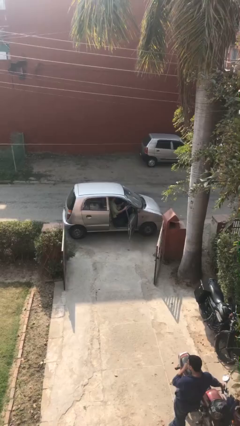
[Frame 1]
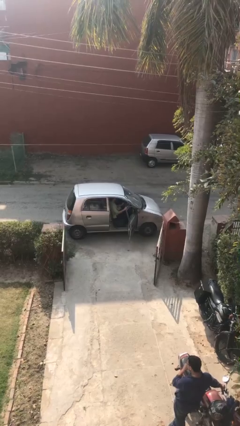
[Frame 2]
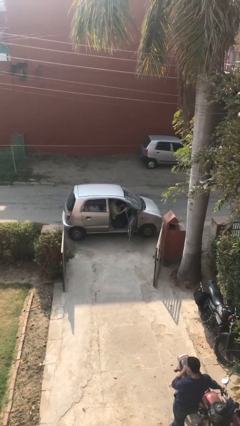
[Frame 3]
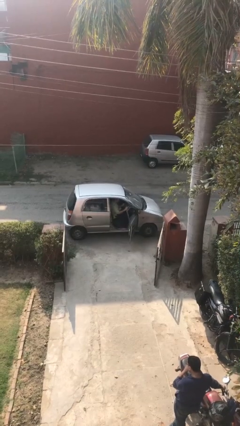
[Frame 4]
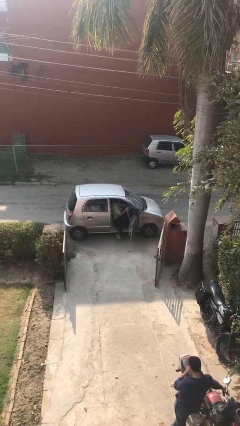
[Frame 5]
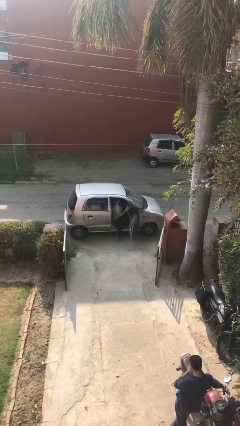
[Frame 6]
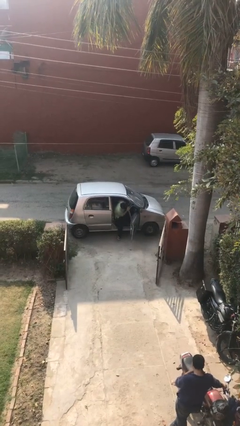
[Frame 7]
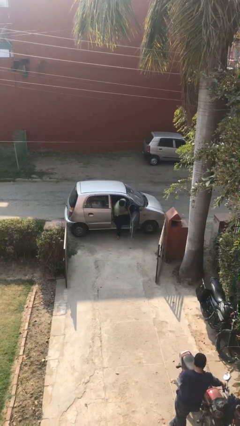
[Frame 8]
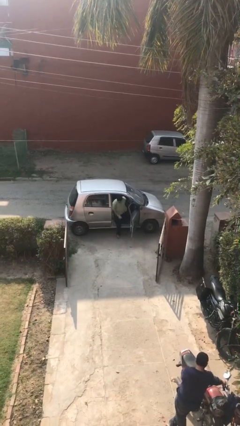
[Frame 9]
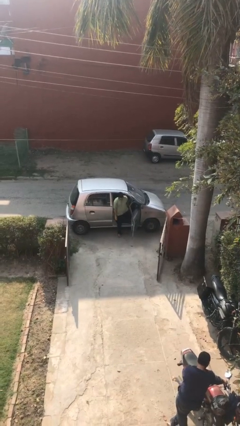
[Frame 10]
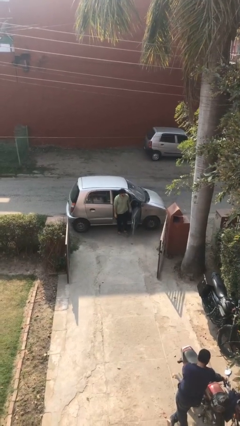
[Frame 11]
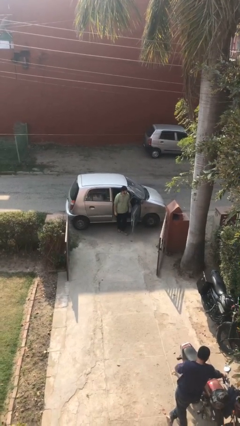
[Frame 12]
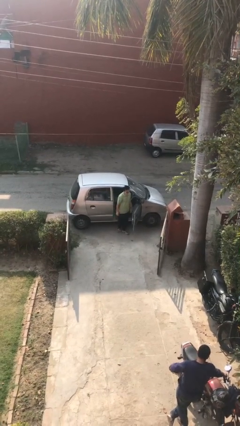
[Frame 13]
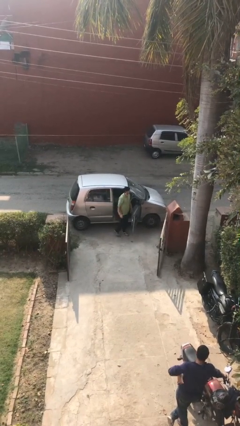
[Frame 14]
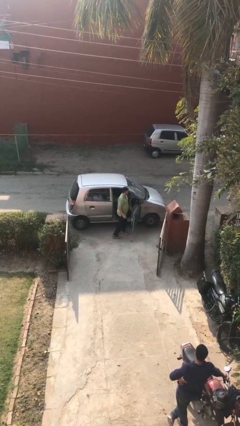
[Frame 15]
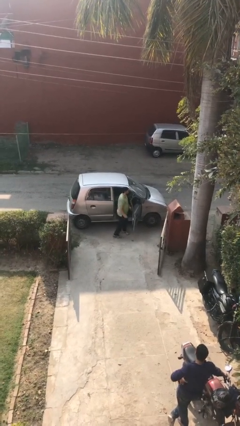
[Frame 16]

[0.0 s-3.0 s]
person exits car

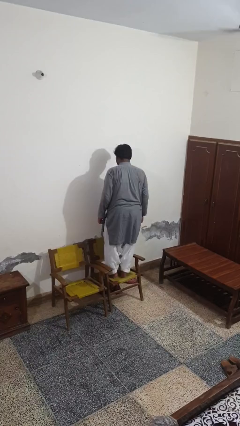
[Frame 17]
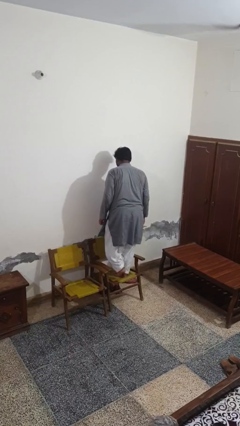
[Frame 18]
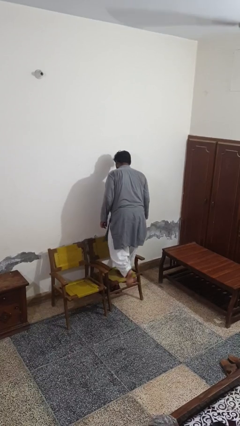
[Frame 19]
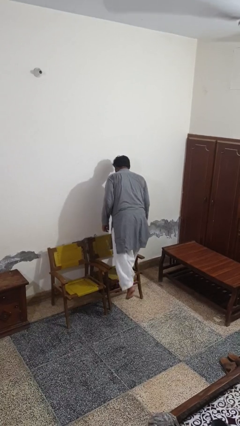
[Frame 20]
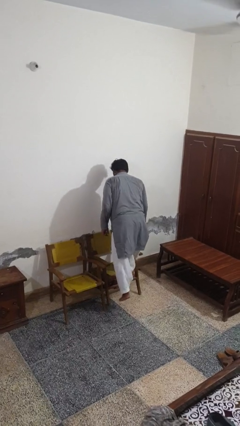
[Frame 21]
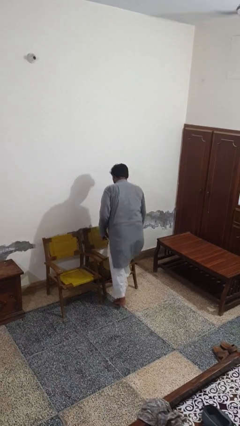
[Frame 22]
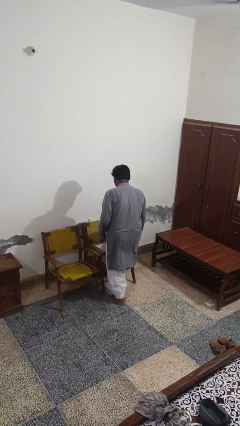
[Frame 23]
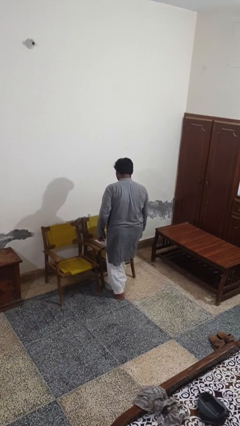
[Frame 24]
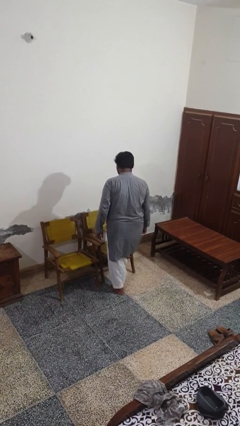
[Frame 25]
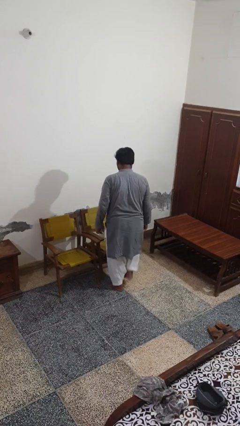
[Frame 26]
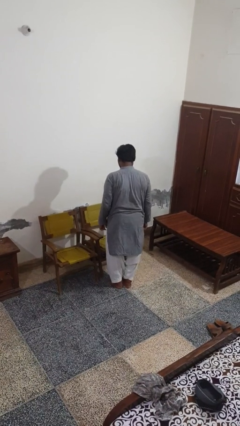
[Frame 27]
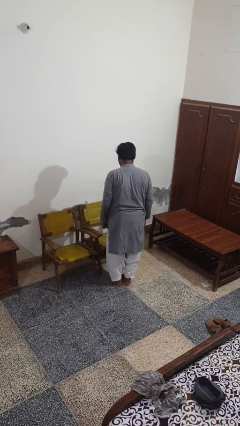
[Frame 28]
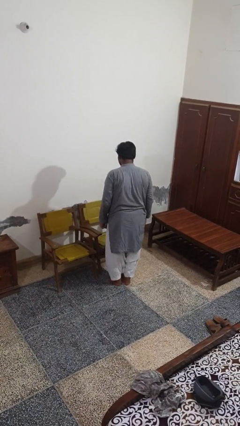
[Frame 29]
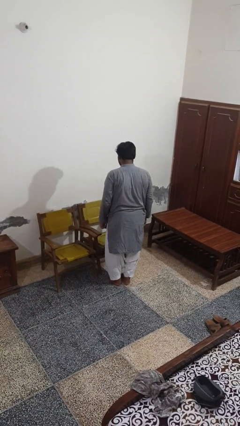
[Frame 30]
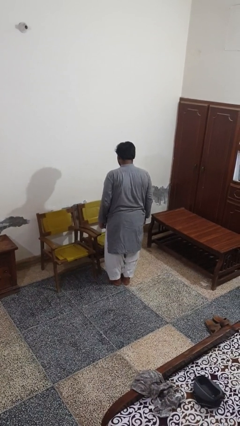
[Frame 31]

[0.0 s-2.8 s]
person climbs off chair

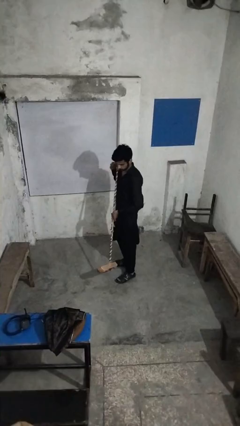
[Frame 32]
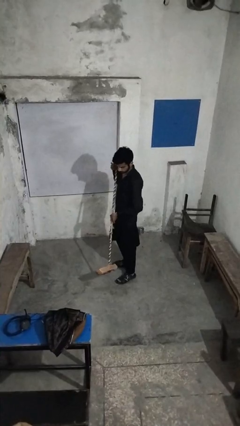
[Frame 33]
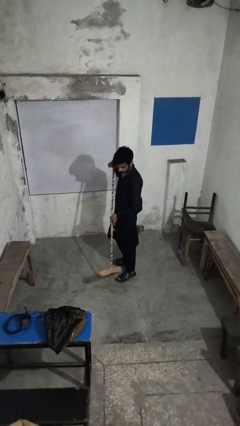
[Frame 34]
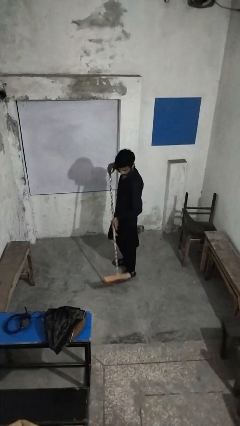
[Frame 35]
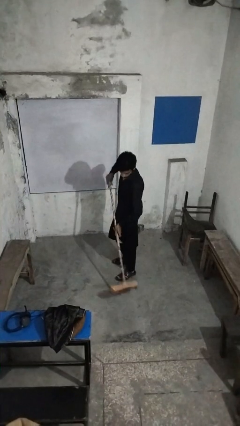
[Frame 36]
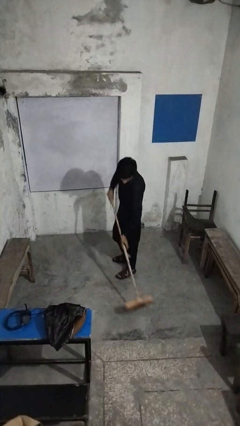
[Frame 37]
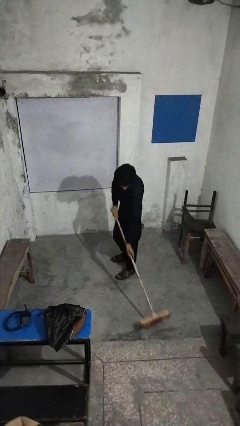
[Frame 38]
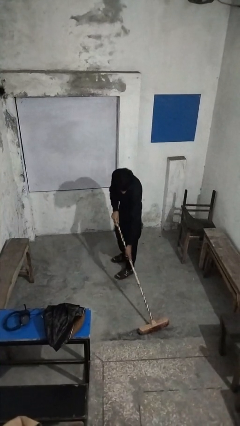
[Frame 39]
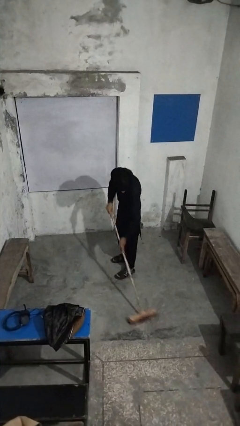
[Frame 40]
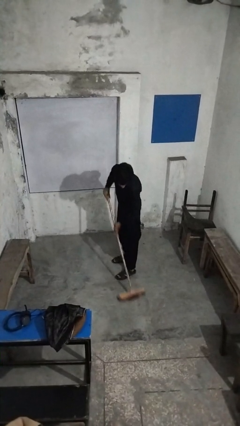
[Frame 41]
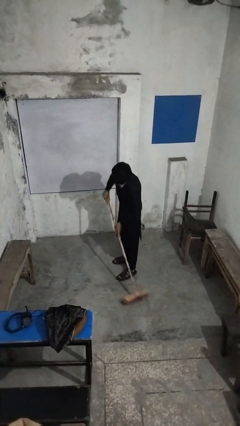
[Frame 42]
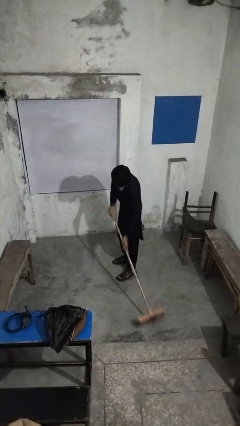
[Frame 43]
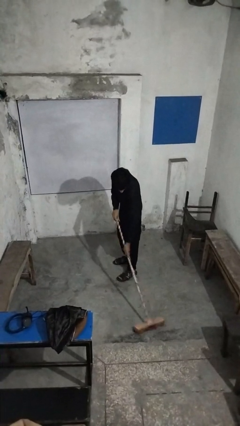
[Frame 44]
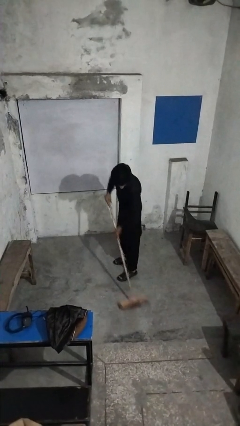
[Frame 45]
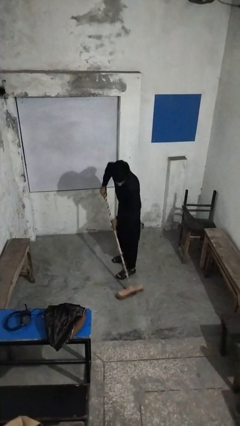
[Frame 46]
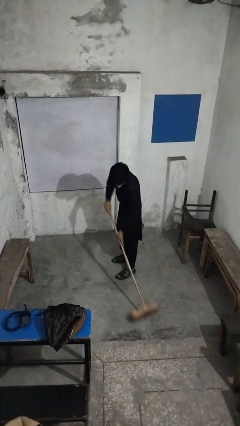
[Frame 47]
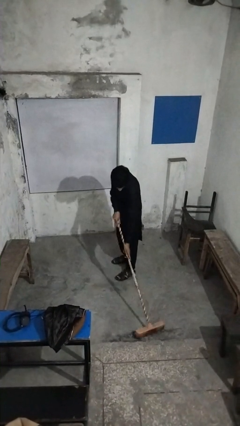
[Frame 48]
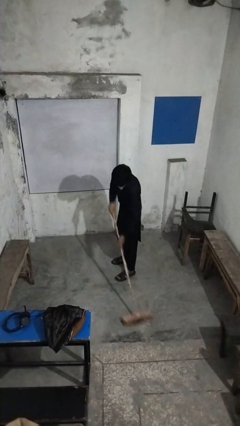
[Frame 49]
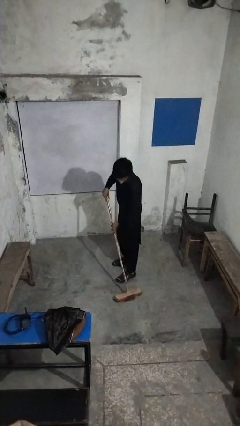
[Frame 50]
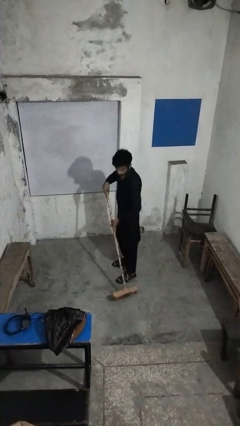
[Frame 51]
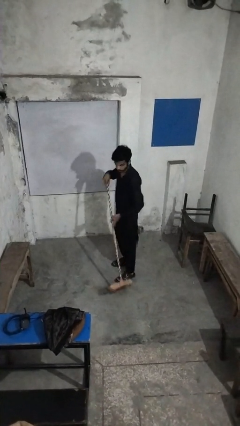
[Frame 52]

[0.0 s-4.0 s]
person sweeps floor

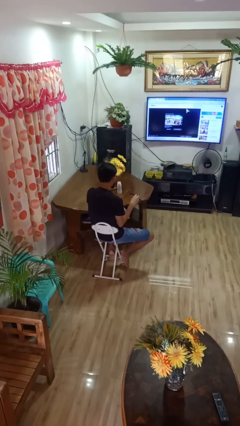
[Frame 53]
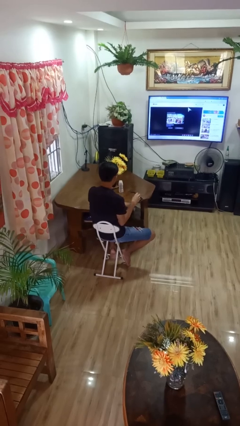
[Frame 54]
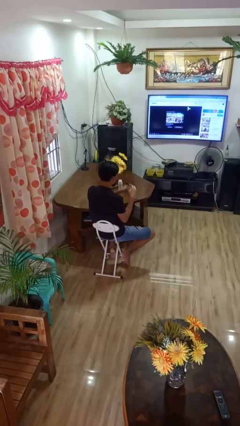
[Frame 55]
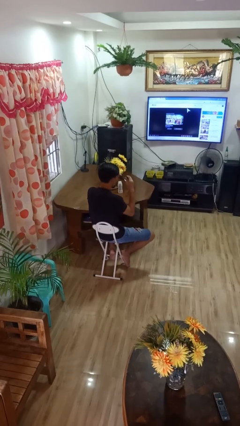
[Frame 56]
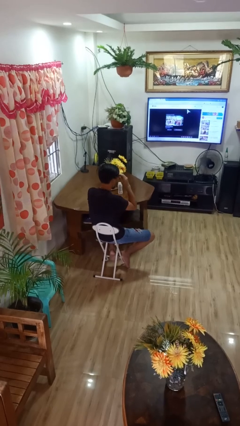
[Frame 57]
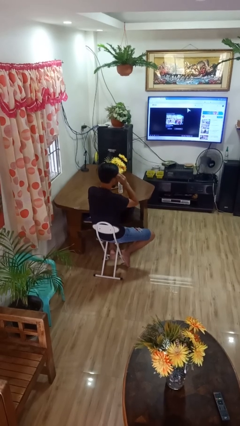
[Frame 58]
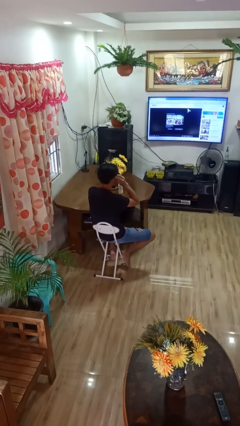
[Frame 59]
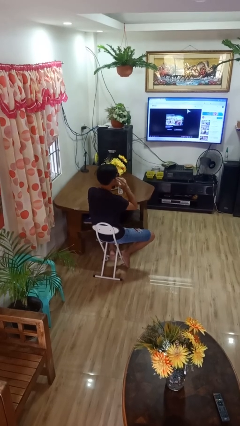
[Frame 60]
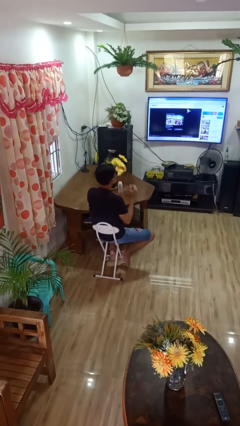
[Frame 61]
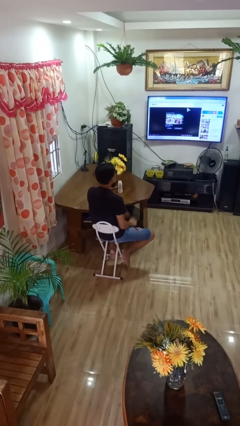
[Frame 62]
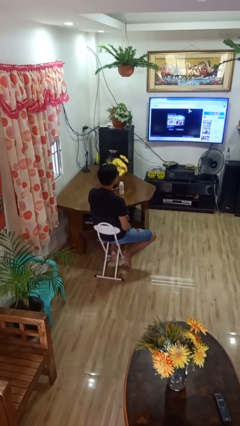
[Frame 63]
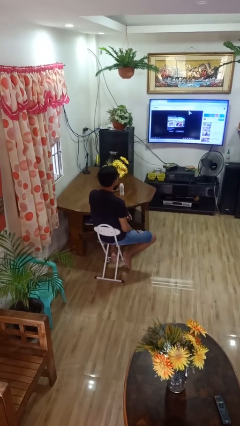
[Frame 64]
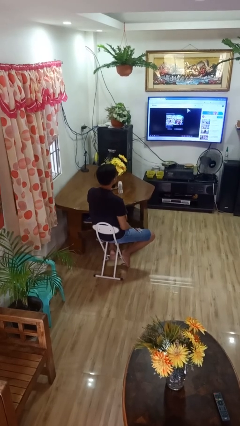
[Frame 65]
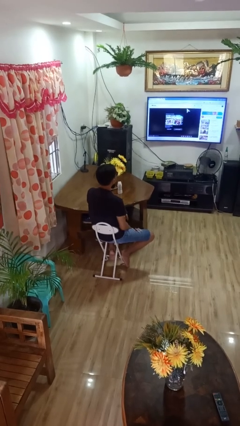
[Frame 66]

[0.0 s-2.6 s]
person puts on sunglasses

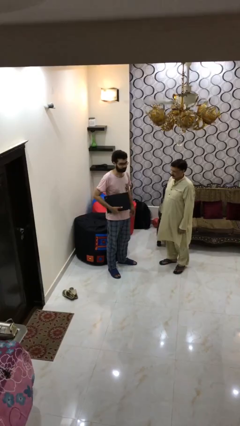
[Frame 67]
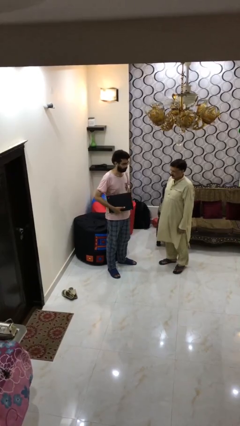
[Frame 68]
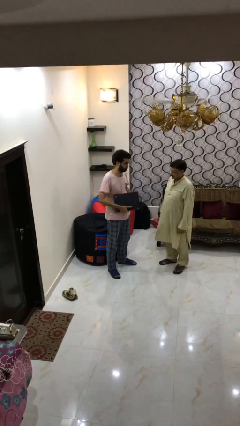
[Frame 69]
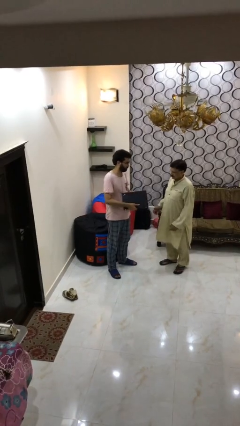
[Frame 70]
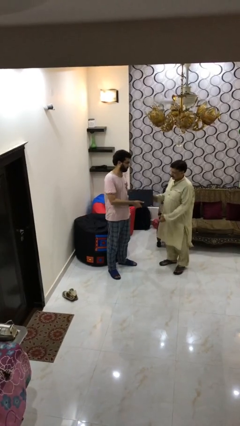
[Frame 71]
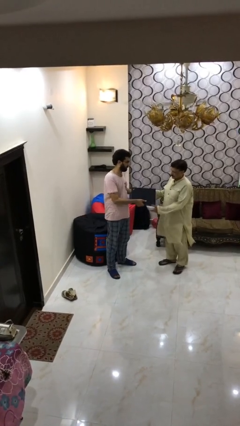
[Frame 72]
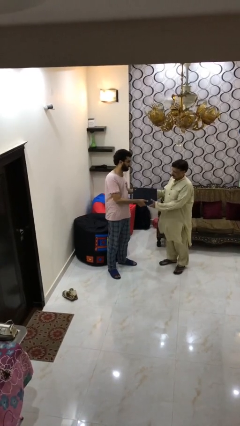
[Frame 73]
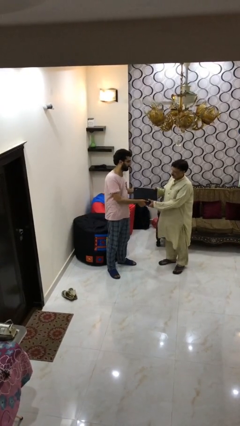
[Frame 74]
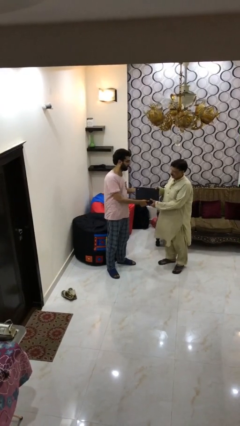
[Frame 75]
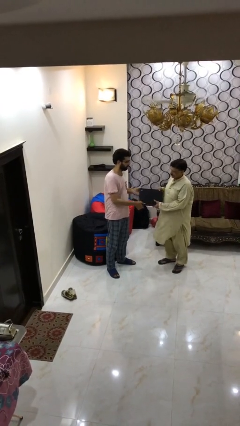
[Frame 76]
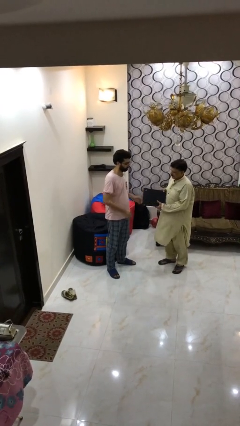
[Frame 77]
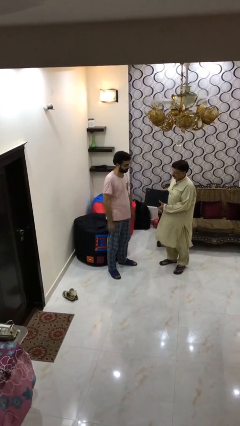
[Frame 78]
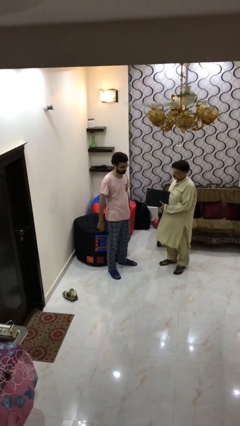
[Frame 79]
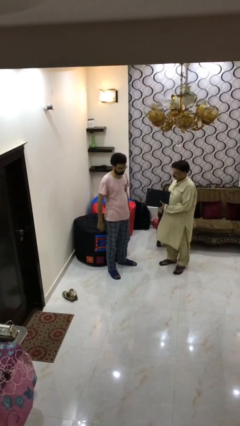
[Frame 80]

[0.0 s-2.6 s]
person transfers object to person

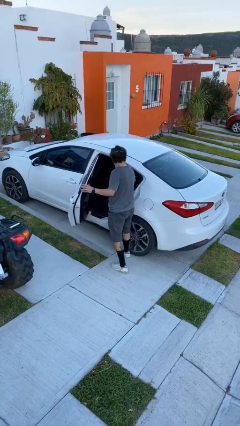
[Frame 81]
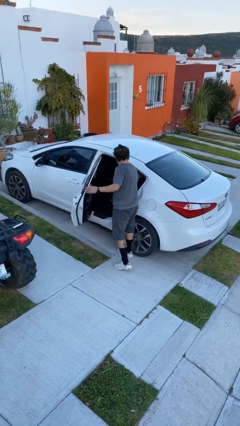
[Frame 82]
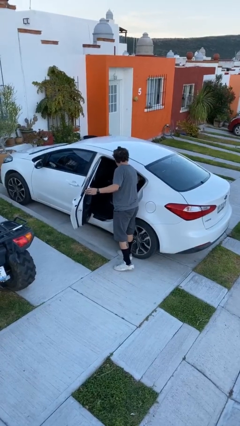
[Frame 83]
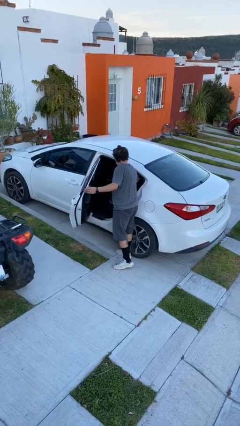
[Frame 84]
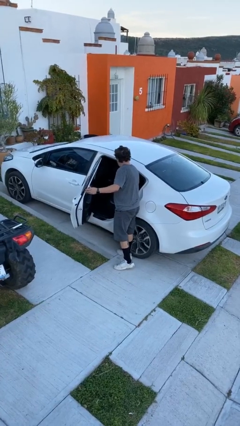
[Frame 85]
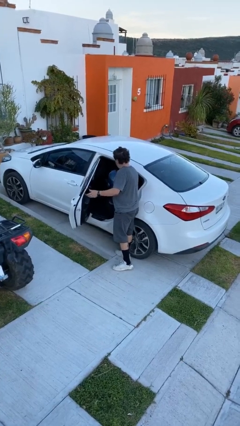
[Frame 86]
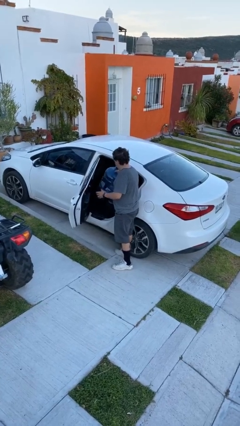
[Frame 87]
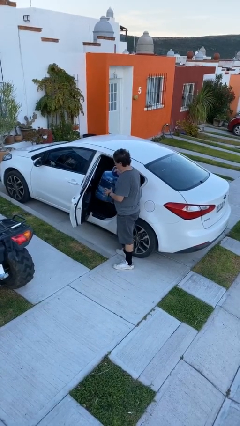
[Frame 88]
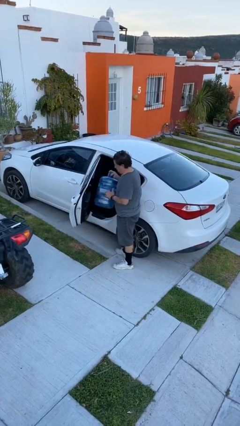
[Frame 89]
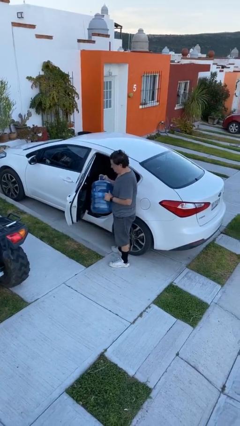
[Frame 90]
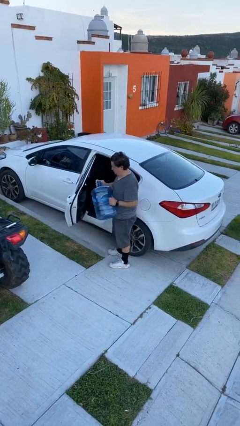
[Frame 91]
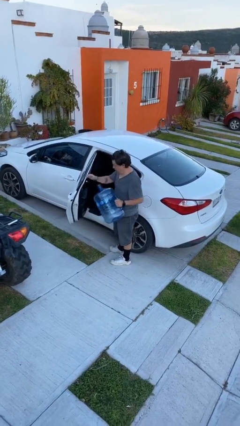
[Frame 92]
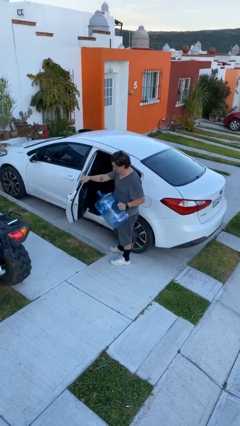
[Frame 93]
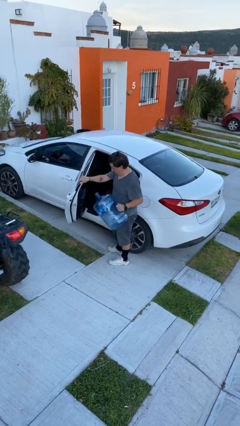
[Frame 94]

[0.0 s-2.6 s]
person unloads car
